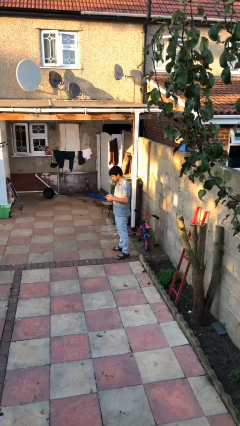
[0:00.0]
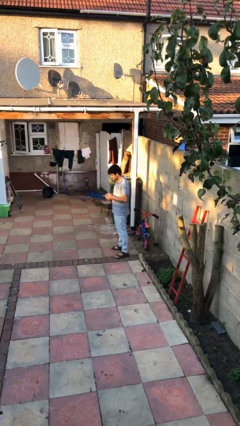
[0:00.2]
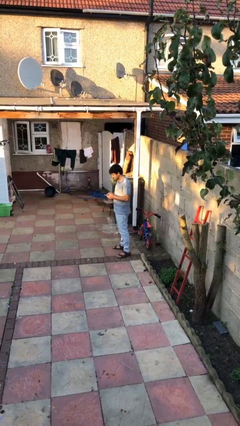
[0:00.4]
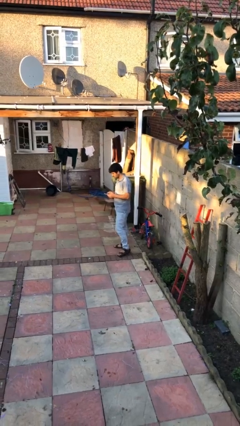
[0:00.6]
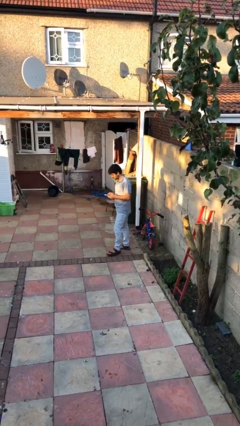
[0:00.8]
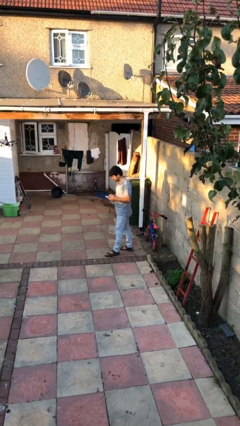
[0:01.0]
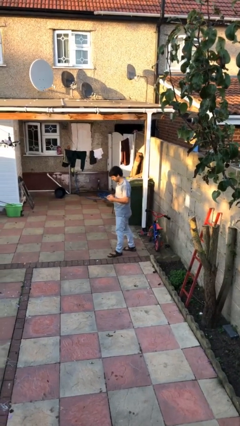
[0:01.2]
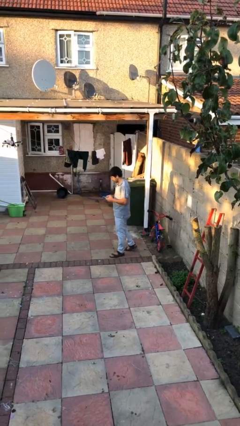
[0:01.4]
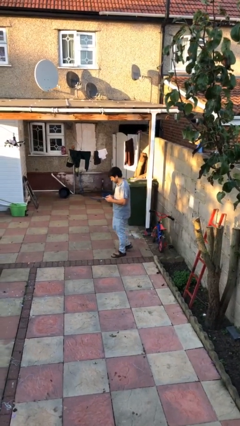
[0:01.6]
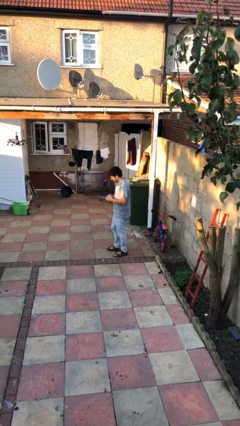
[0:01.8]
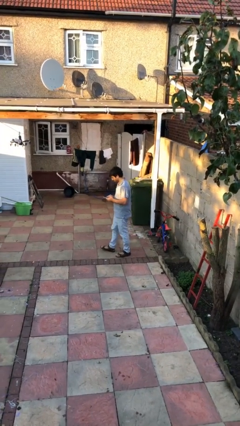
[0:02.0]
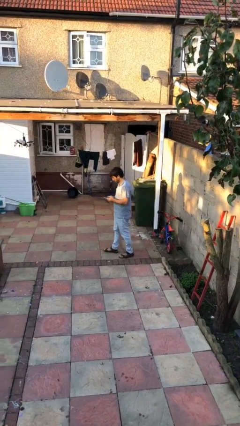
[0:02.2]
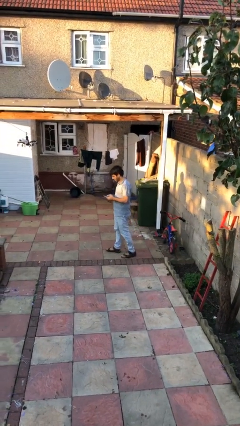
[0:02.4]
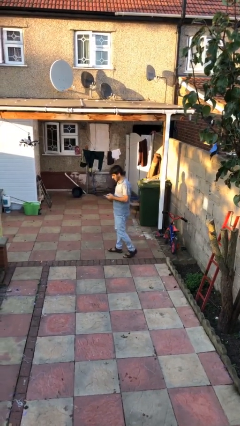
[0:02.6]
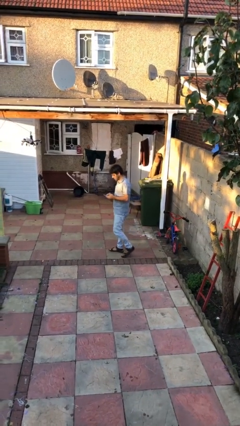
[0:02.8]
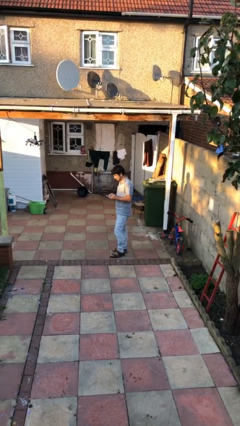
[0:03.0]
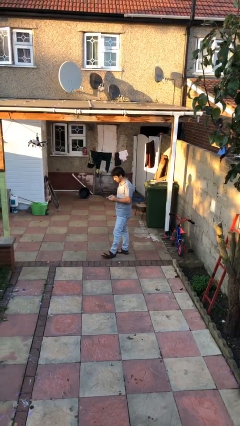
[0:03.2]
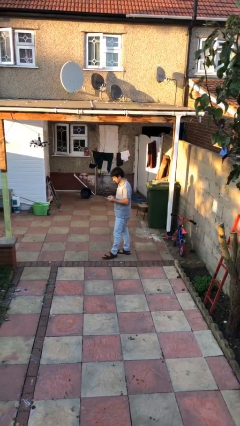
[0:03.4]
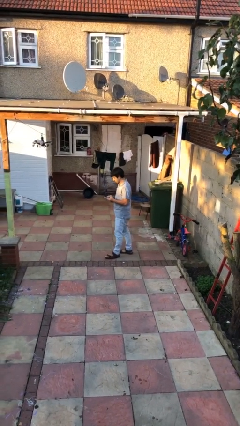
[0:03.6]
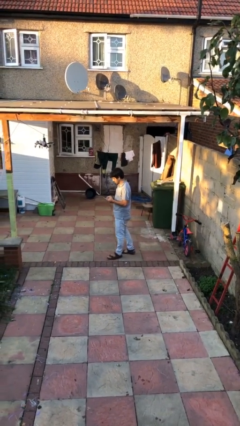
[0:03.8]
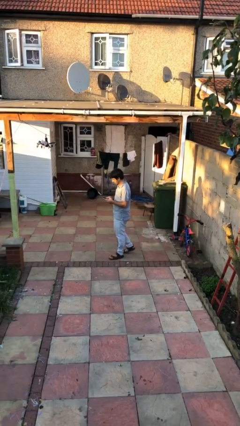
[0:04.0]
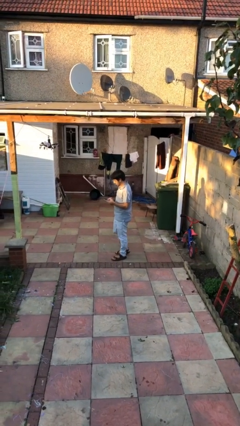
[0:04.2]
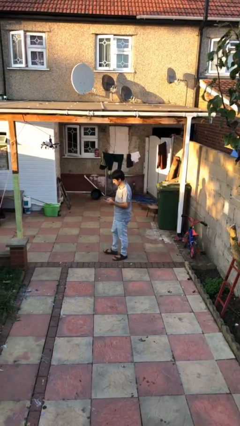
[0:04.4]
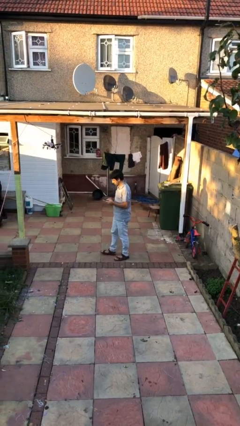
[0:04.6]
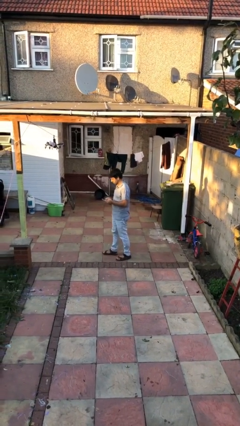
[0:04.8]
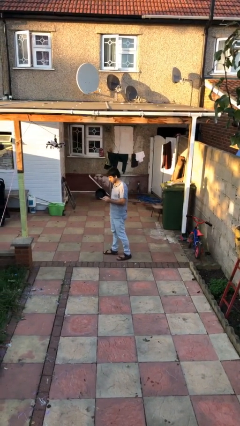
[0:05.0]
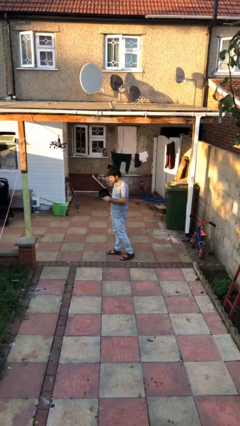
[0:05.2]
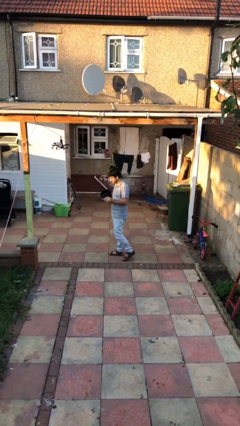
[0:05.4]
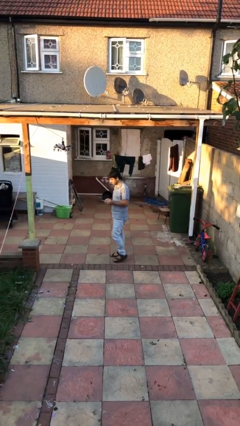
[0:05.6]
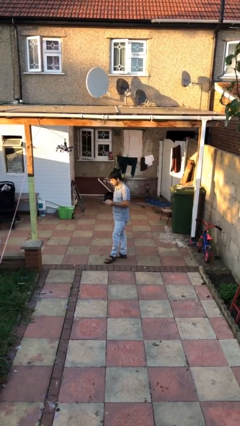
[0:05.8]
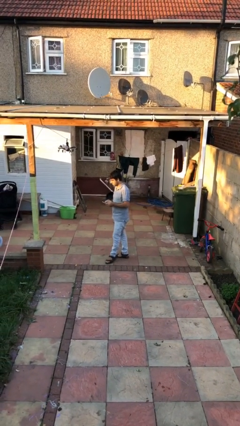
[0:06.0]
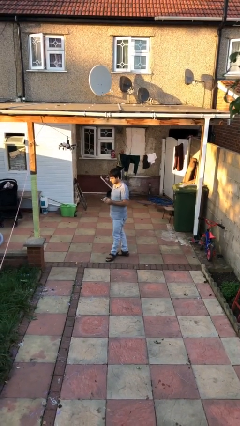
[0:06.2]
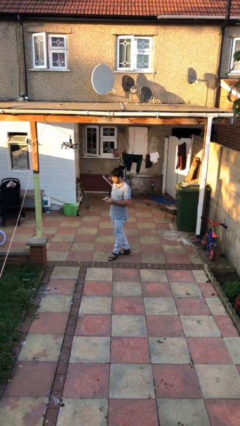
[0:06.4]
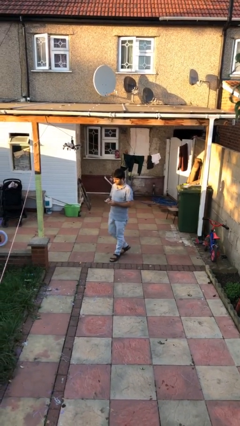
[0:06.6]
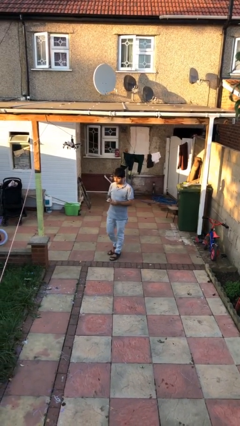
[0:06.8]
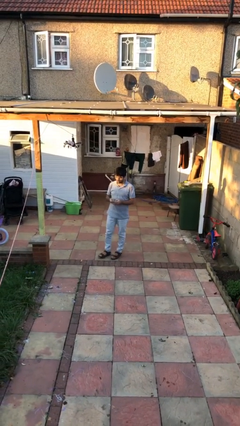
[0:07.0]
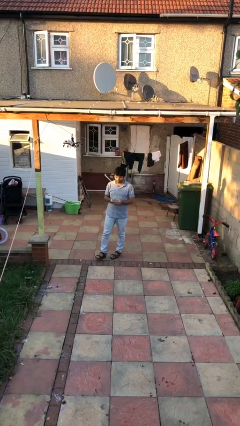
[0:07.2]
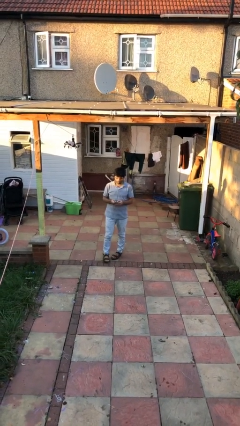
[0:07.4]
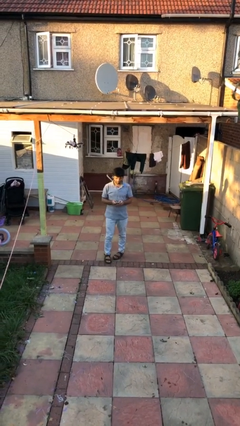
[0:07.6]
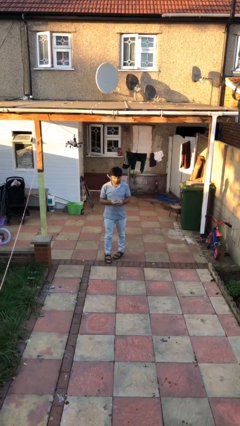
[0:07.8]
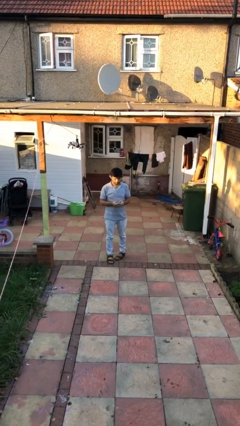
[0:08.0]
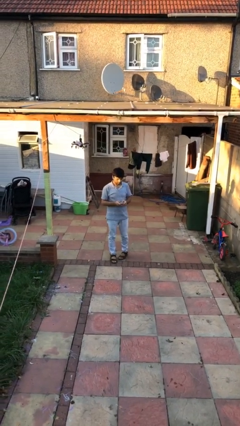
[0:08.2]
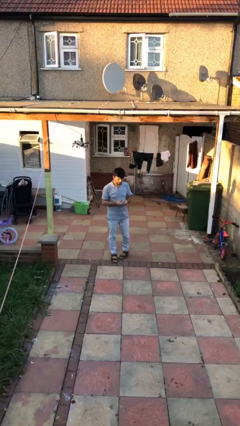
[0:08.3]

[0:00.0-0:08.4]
person texts on phone

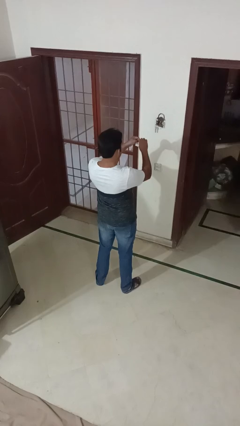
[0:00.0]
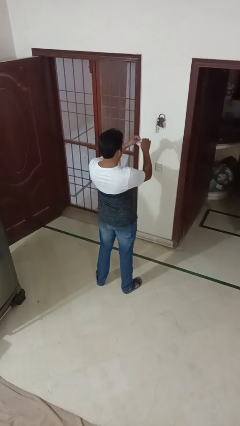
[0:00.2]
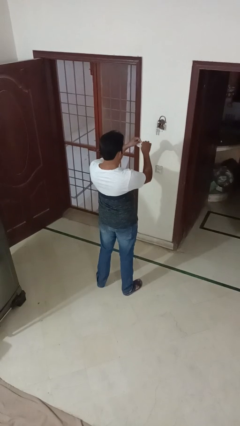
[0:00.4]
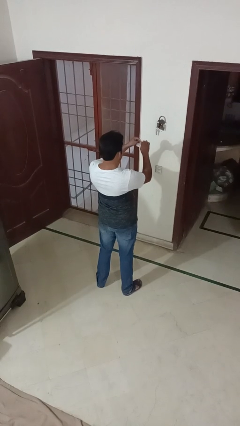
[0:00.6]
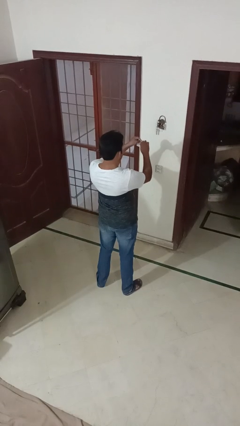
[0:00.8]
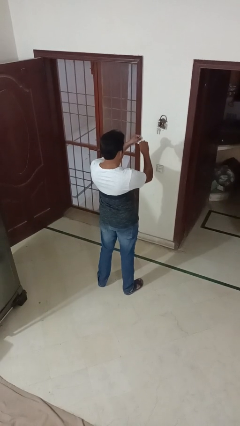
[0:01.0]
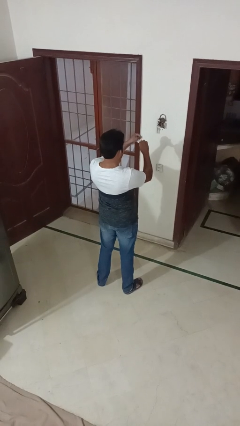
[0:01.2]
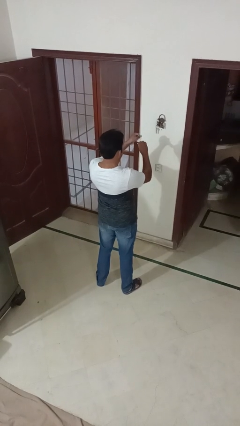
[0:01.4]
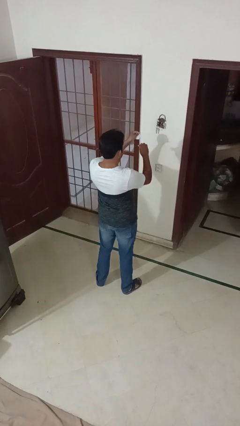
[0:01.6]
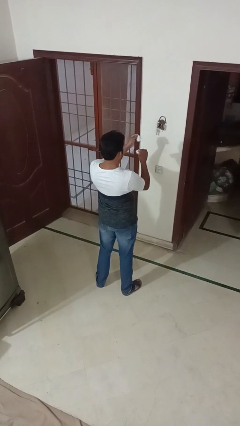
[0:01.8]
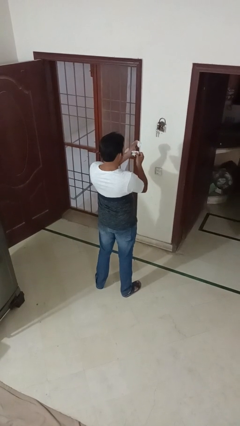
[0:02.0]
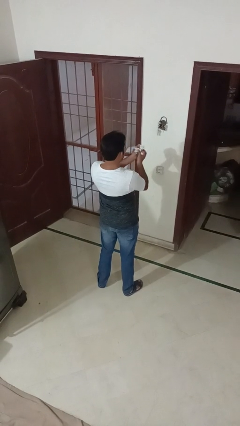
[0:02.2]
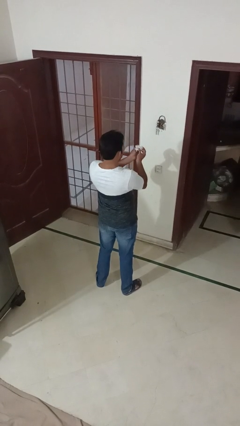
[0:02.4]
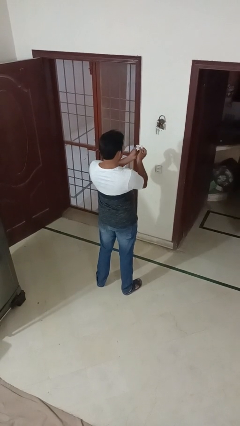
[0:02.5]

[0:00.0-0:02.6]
person tears paper

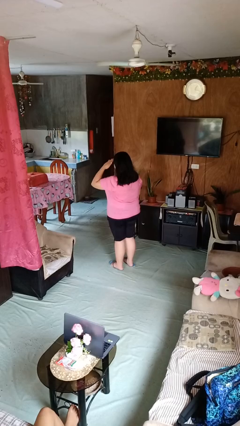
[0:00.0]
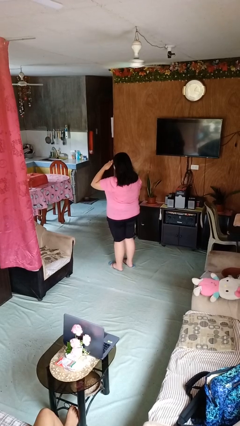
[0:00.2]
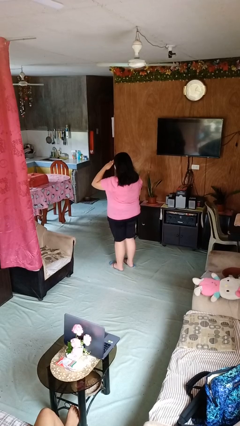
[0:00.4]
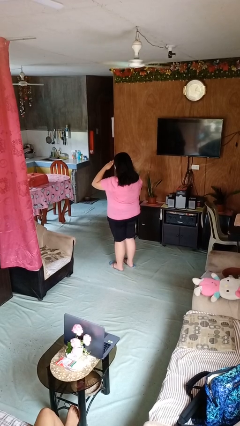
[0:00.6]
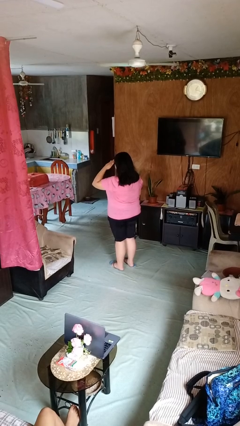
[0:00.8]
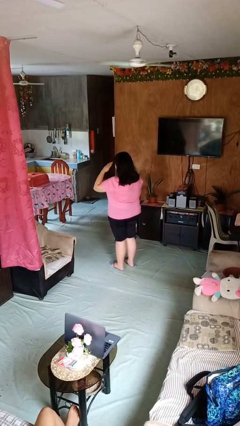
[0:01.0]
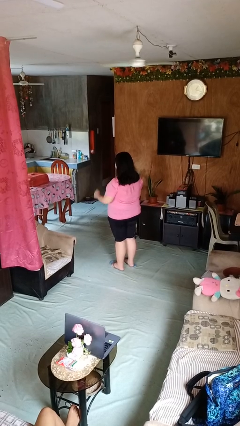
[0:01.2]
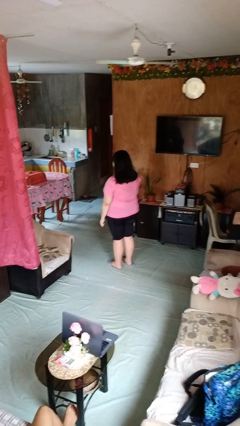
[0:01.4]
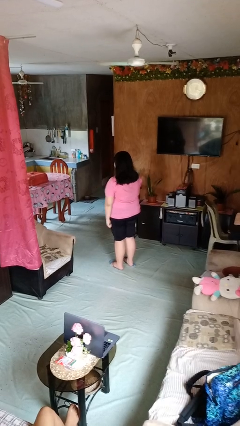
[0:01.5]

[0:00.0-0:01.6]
person salutes

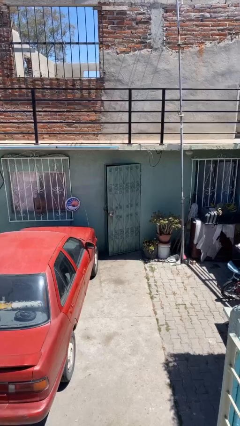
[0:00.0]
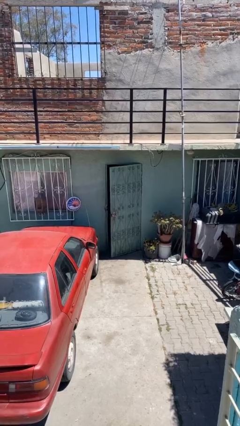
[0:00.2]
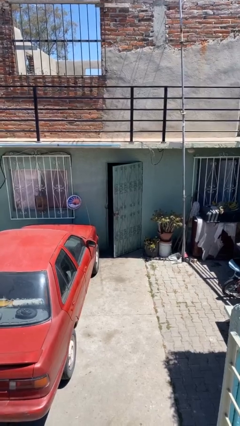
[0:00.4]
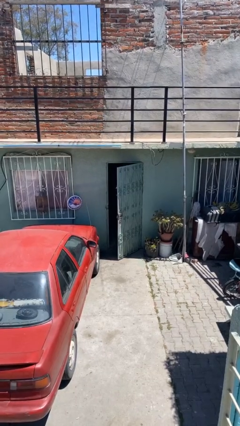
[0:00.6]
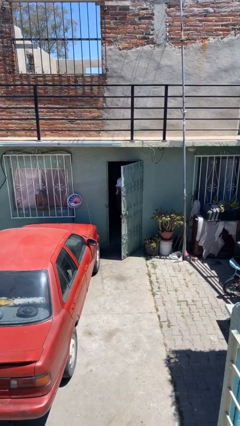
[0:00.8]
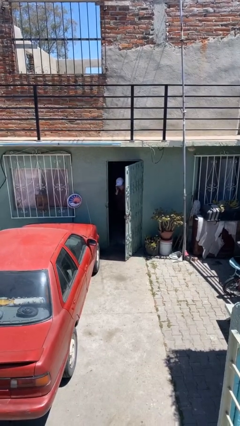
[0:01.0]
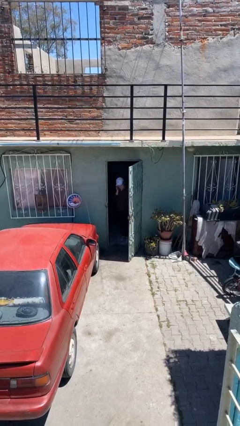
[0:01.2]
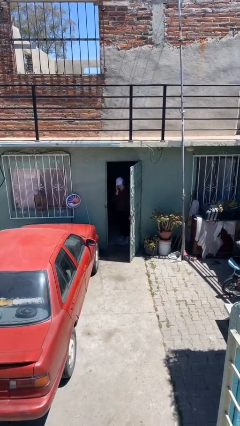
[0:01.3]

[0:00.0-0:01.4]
person opens facility door

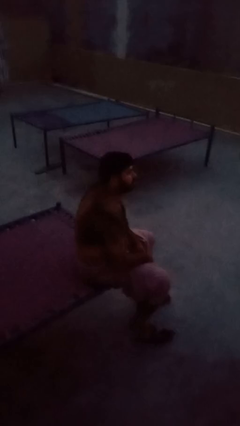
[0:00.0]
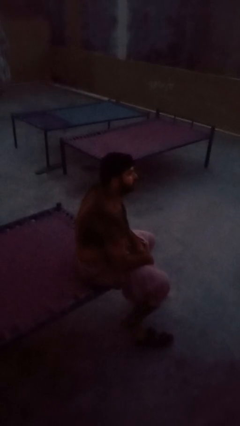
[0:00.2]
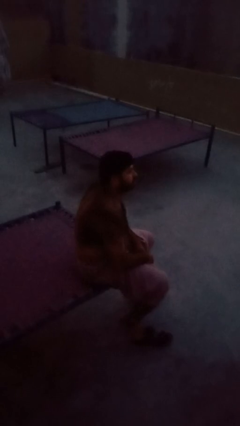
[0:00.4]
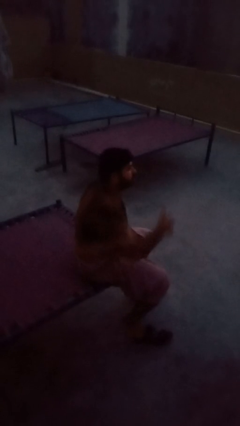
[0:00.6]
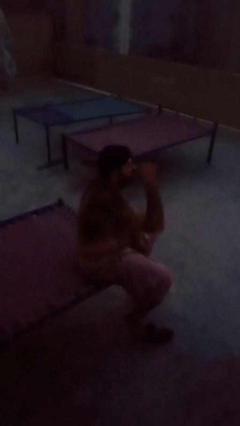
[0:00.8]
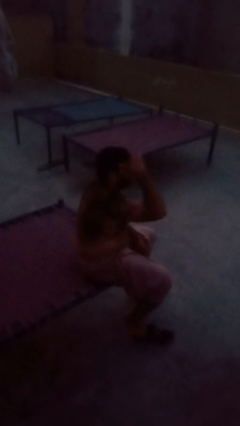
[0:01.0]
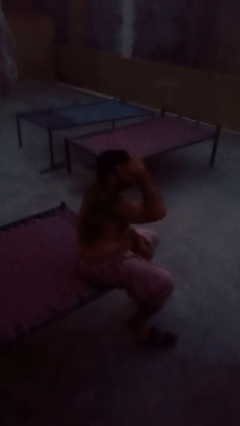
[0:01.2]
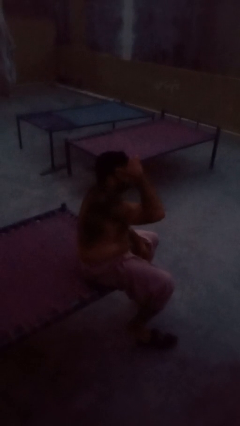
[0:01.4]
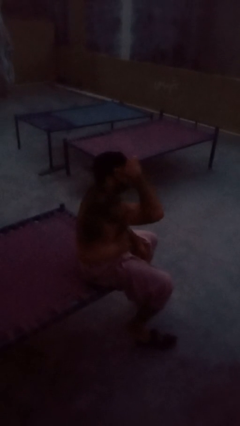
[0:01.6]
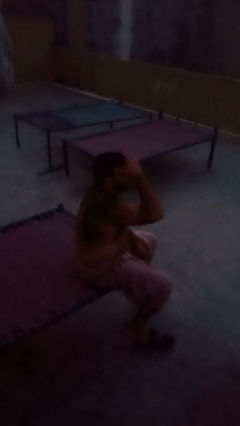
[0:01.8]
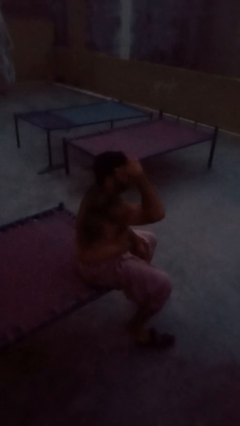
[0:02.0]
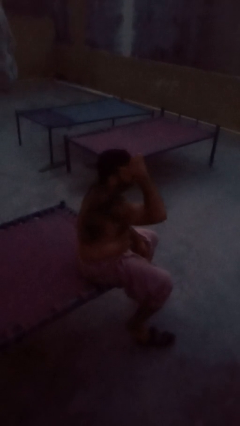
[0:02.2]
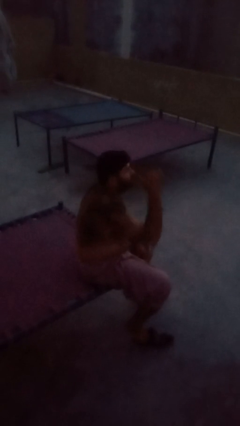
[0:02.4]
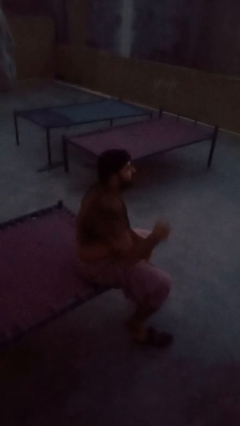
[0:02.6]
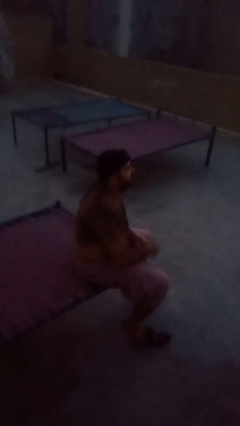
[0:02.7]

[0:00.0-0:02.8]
person shades eyes

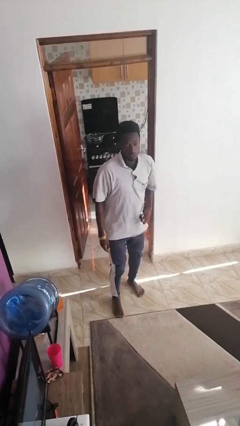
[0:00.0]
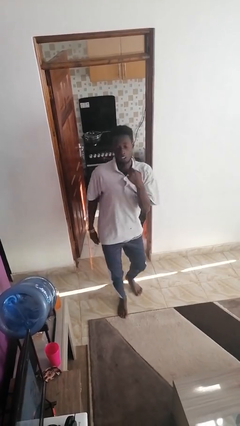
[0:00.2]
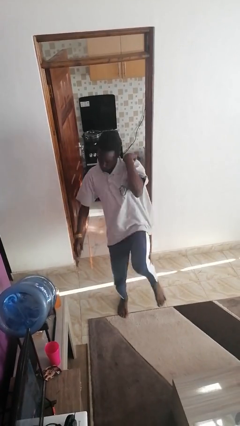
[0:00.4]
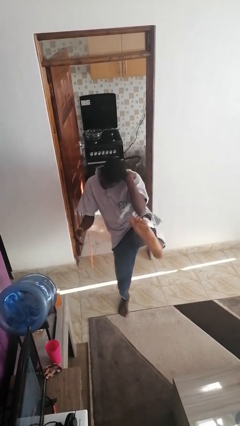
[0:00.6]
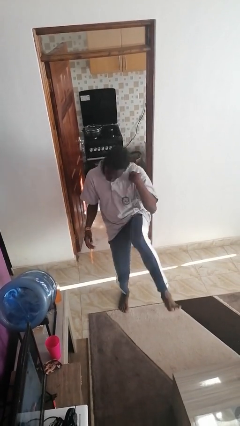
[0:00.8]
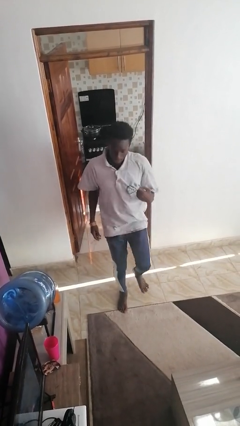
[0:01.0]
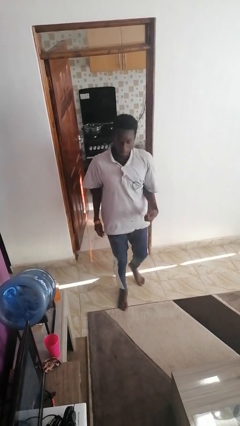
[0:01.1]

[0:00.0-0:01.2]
person karate kicks
